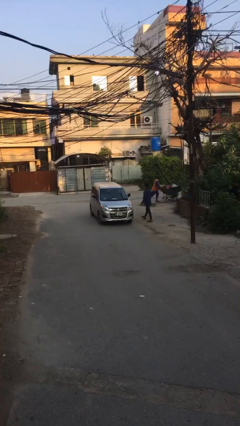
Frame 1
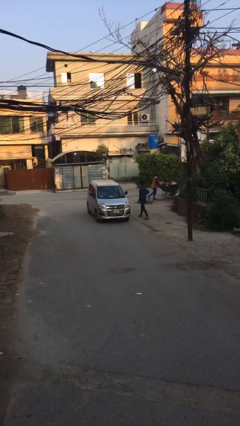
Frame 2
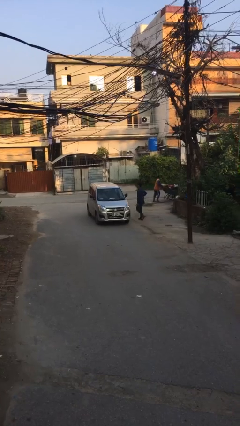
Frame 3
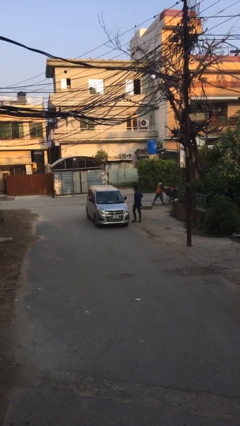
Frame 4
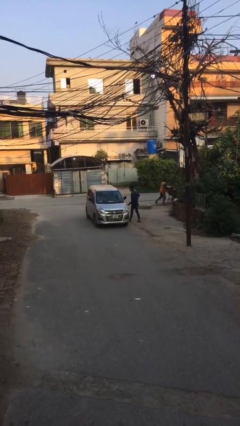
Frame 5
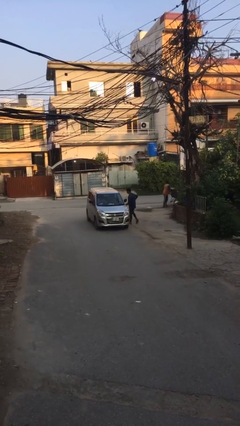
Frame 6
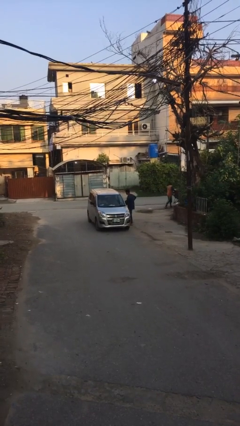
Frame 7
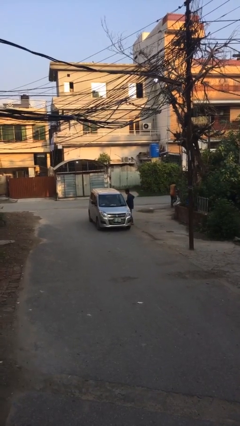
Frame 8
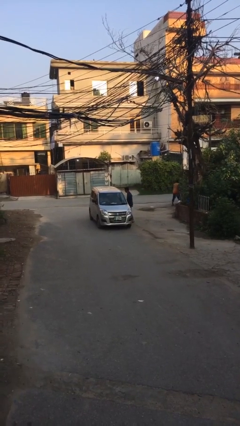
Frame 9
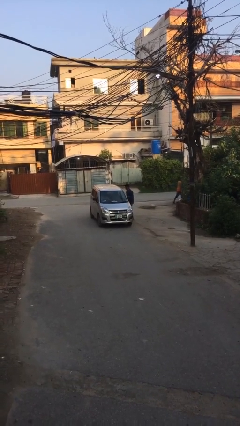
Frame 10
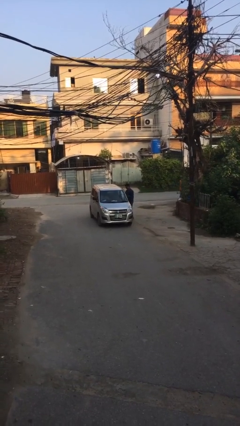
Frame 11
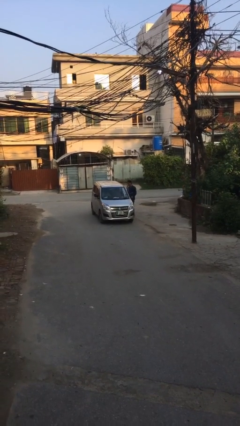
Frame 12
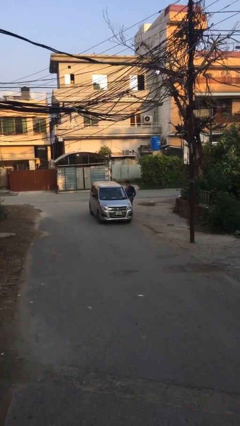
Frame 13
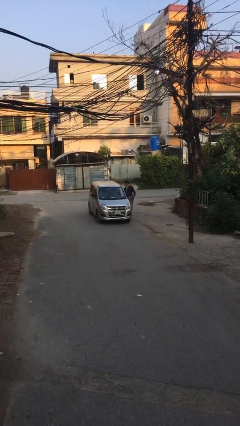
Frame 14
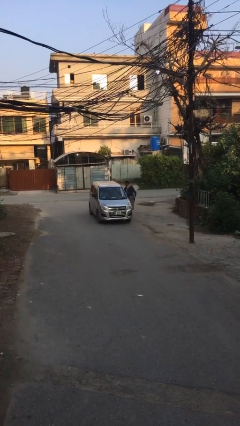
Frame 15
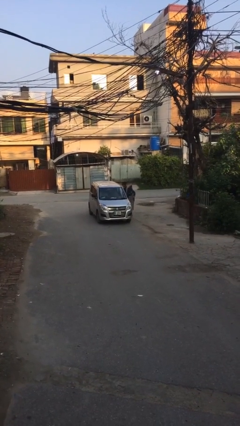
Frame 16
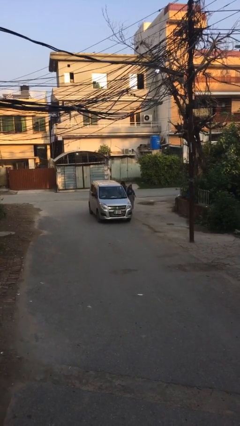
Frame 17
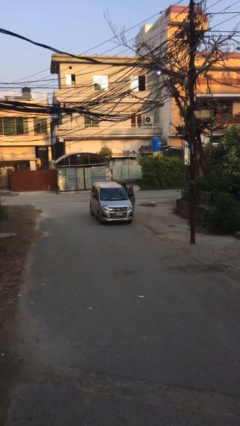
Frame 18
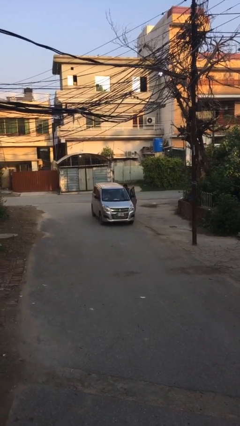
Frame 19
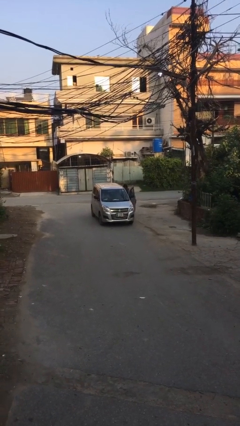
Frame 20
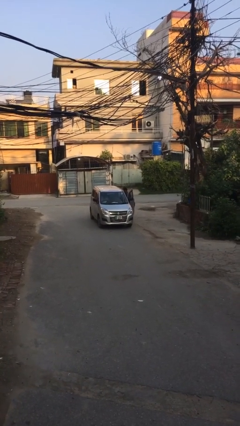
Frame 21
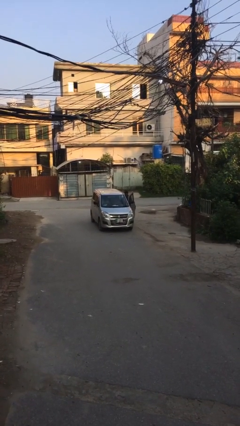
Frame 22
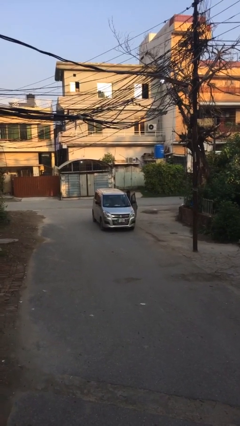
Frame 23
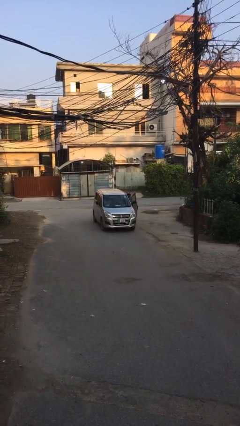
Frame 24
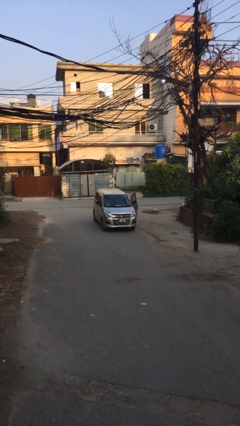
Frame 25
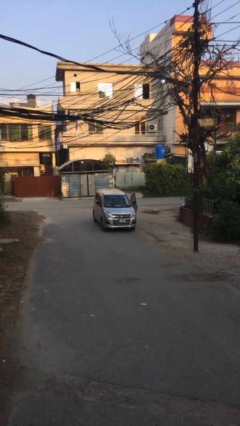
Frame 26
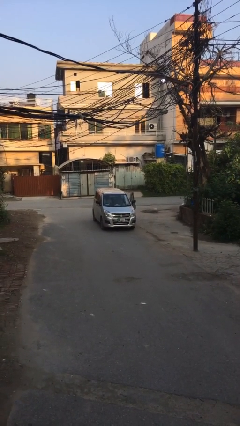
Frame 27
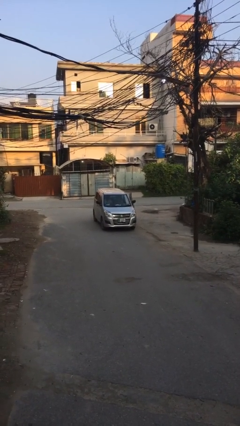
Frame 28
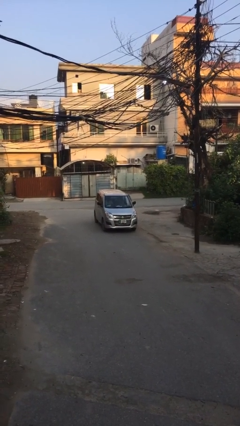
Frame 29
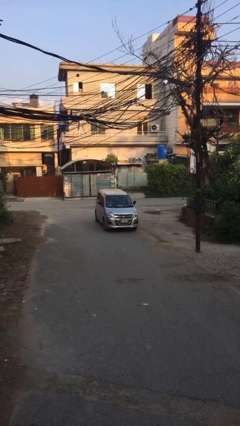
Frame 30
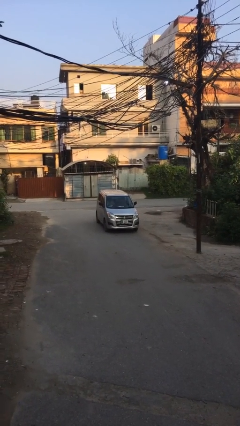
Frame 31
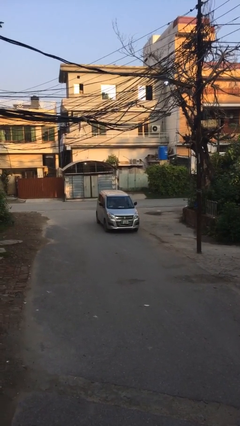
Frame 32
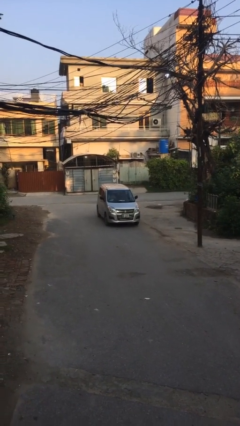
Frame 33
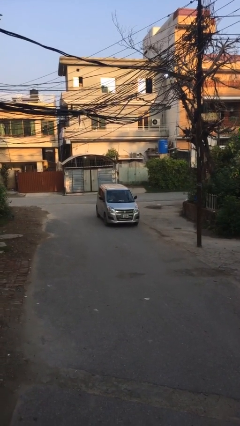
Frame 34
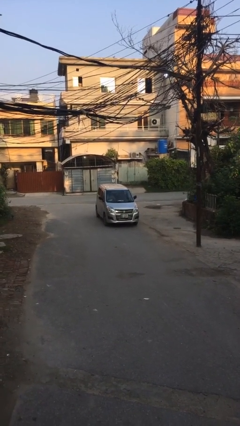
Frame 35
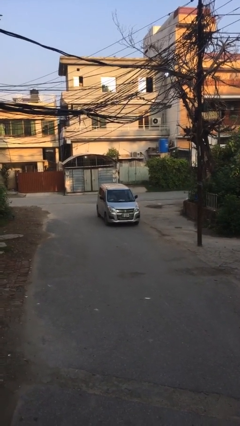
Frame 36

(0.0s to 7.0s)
car picks up person

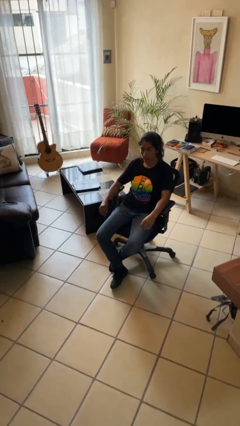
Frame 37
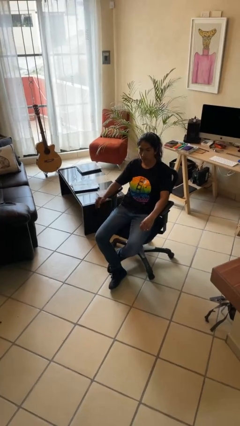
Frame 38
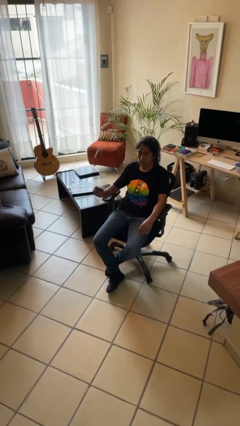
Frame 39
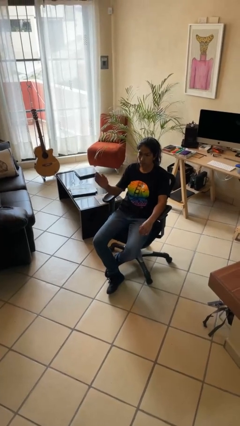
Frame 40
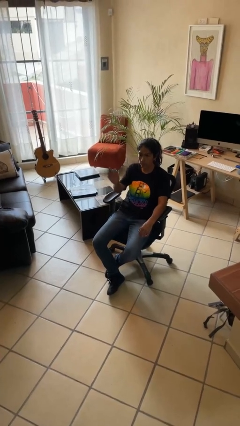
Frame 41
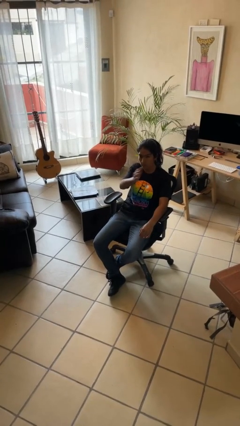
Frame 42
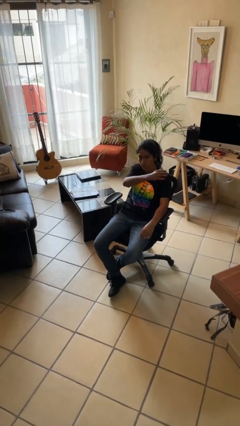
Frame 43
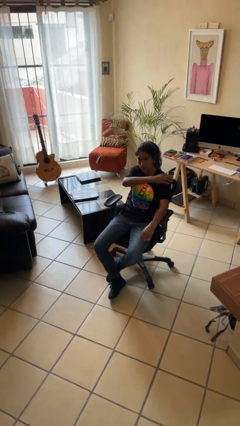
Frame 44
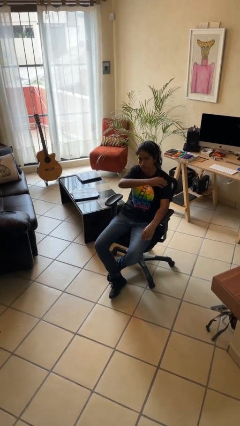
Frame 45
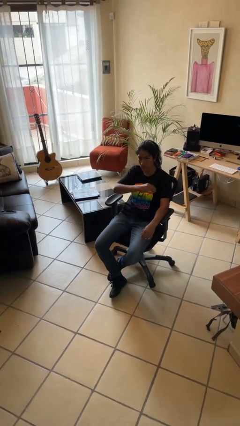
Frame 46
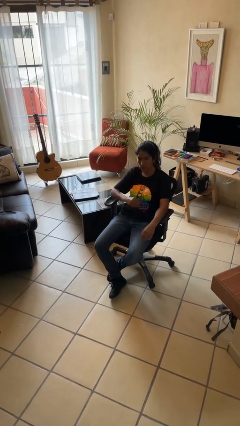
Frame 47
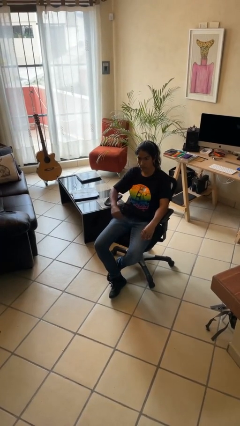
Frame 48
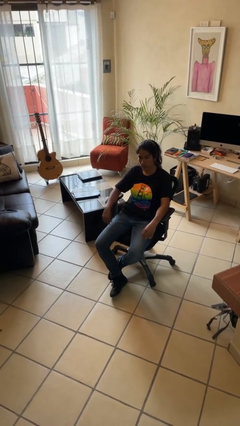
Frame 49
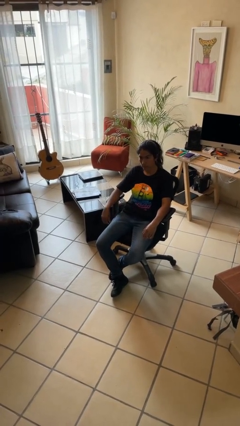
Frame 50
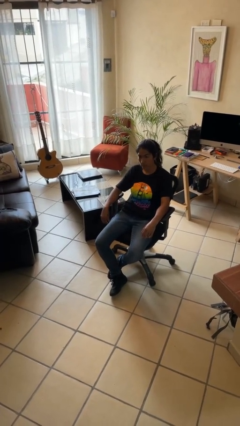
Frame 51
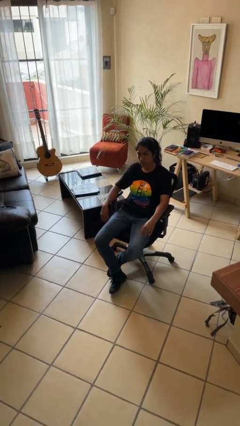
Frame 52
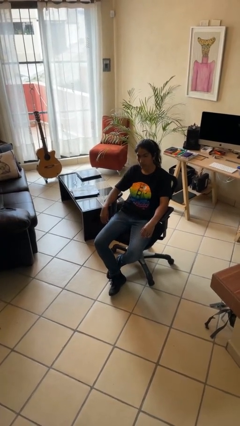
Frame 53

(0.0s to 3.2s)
person gestures swipe left

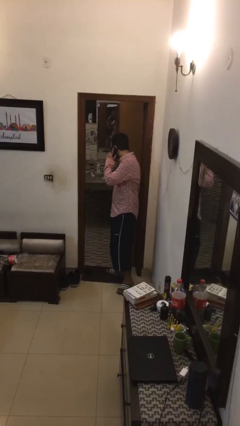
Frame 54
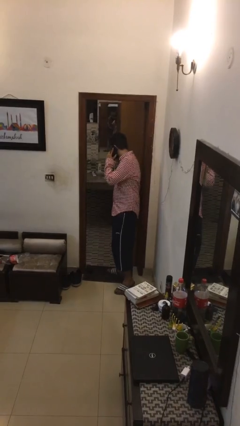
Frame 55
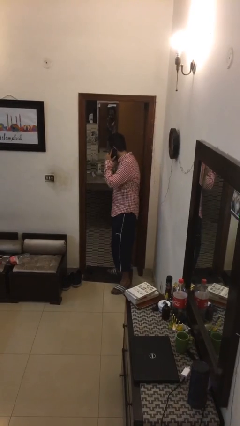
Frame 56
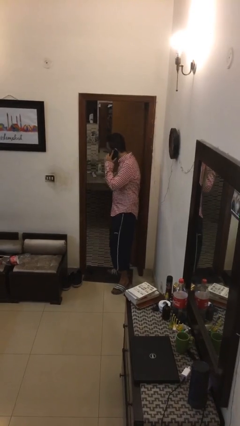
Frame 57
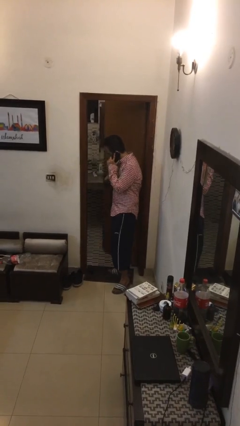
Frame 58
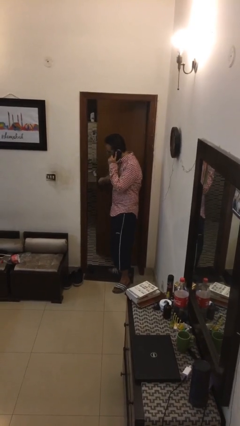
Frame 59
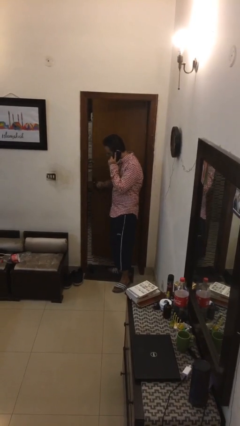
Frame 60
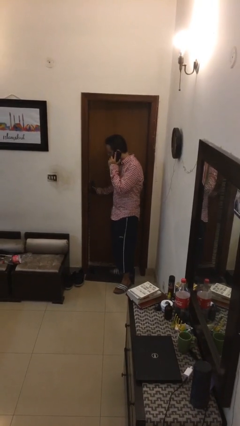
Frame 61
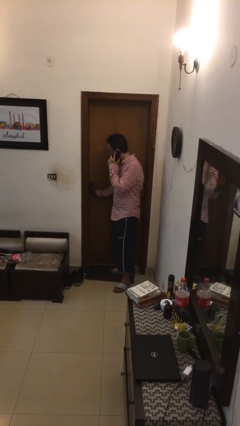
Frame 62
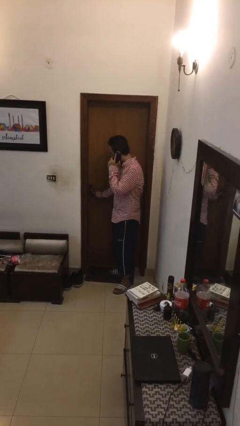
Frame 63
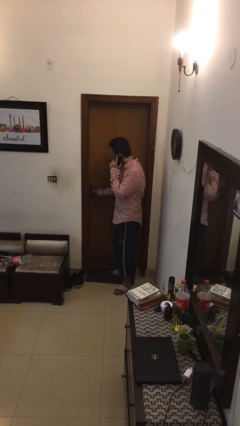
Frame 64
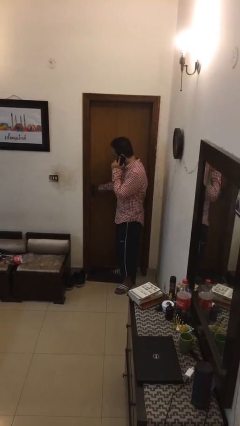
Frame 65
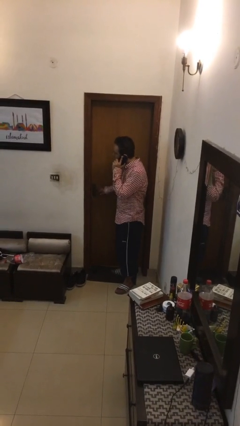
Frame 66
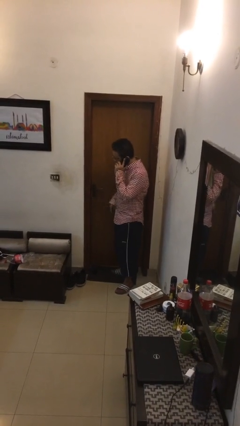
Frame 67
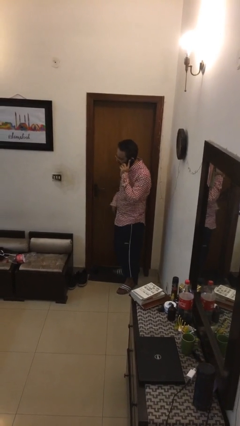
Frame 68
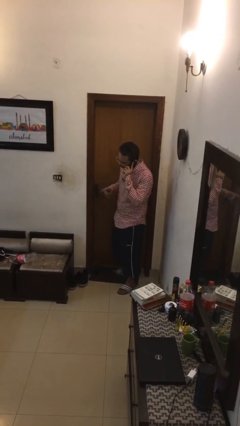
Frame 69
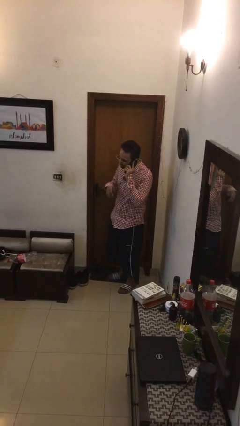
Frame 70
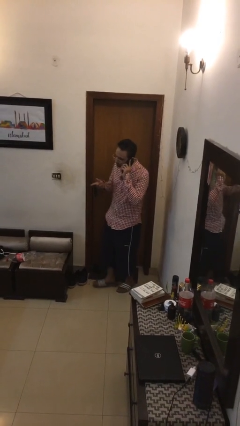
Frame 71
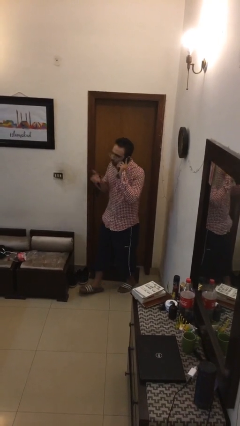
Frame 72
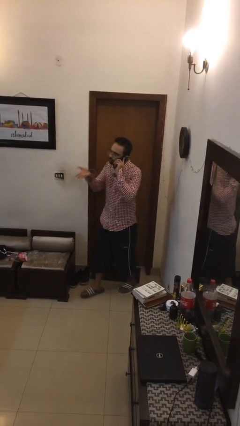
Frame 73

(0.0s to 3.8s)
person closes facility door

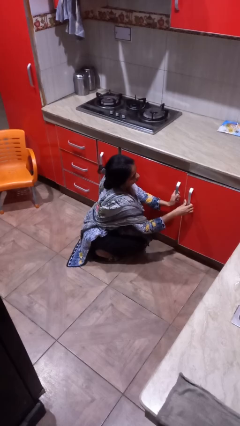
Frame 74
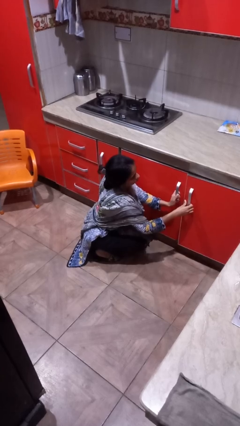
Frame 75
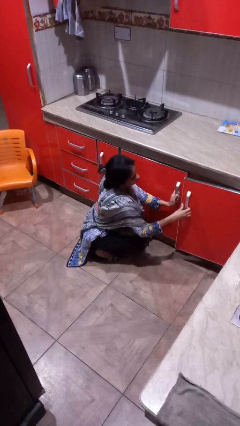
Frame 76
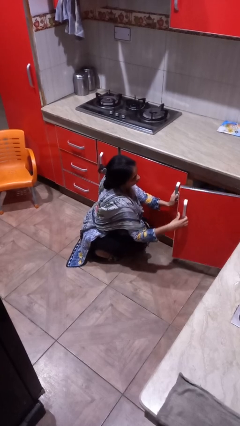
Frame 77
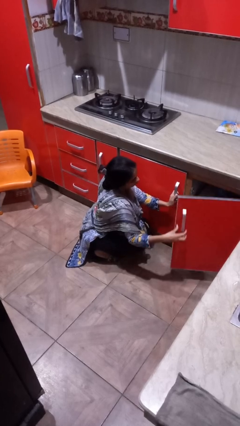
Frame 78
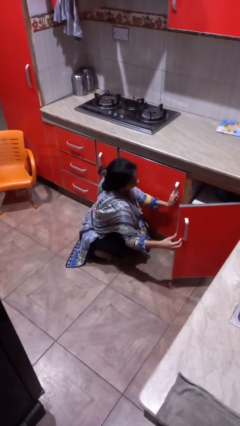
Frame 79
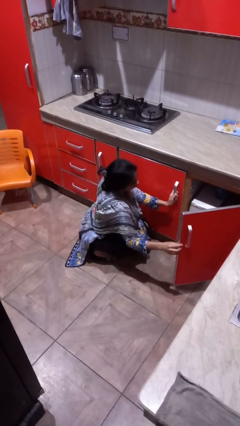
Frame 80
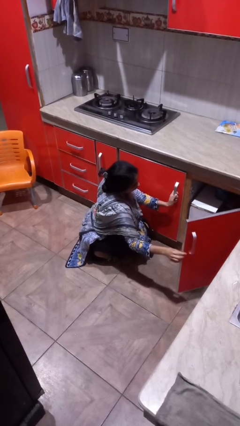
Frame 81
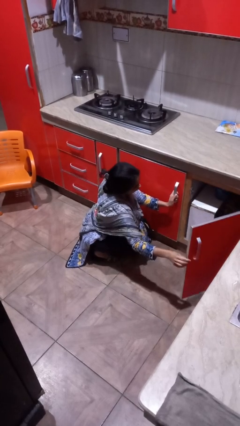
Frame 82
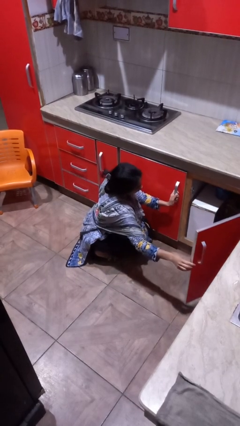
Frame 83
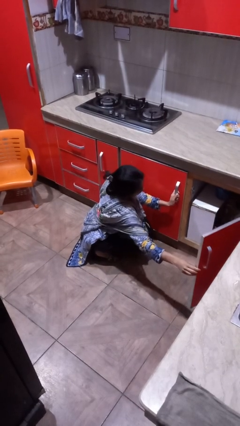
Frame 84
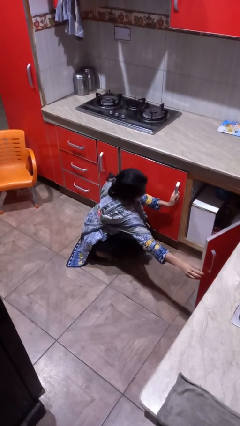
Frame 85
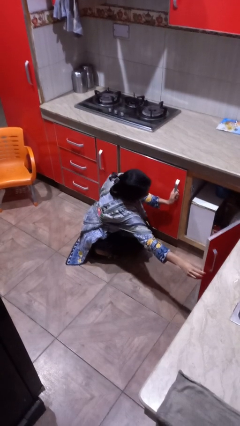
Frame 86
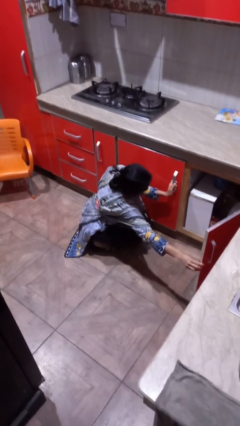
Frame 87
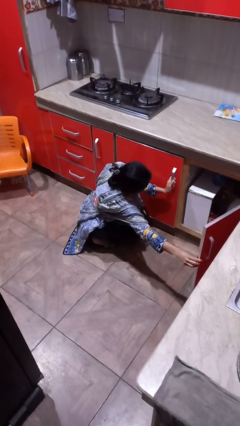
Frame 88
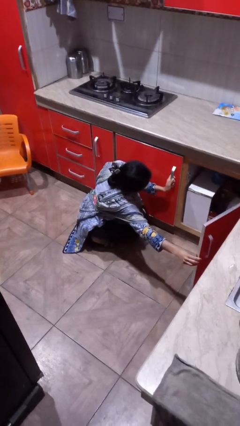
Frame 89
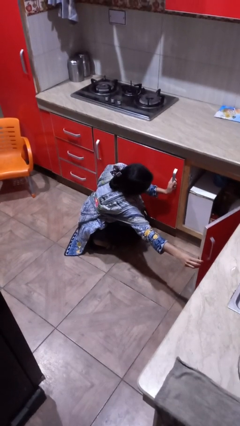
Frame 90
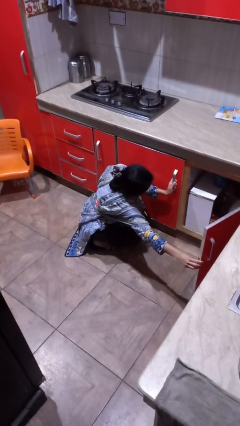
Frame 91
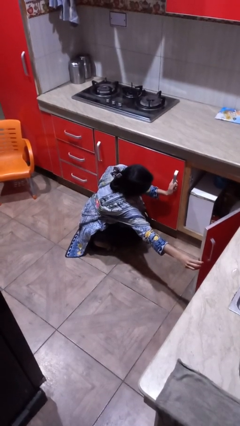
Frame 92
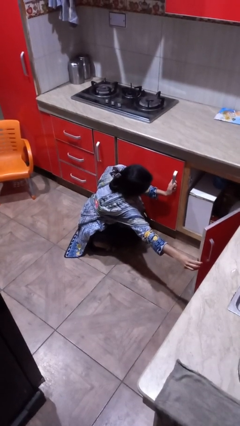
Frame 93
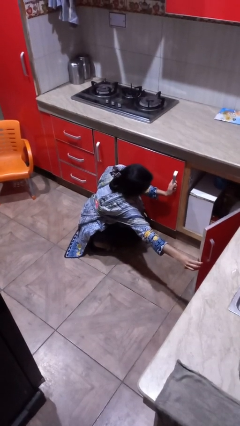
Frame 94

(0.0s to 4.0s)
person opens cabinet

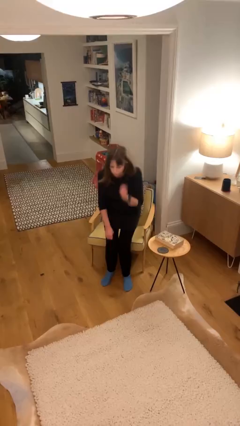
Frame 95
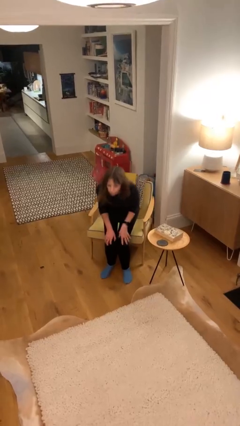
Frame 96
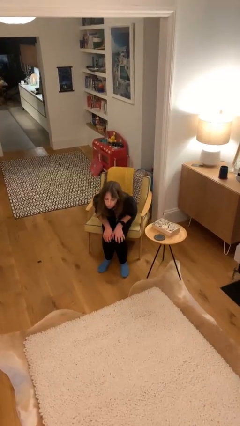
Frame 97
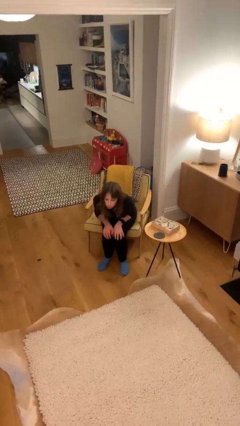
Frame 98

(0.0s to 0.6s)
person sits down
